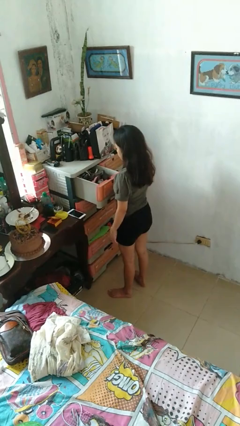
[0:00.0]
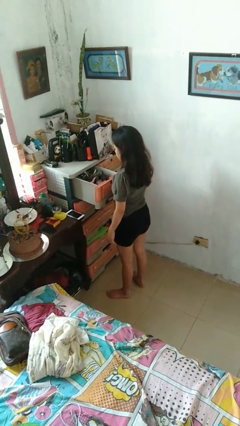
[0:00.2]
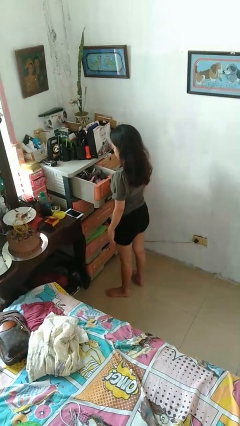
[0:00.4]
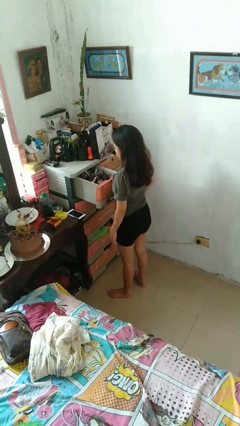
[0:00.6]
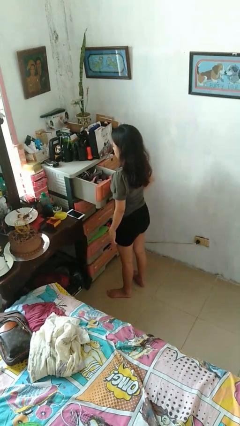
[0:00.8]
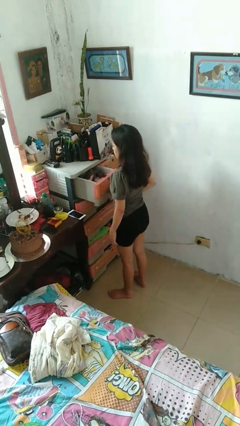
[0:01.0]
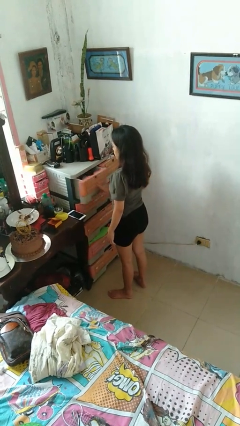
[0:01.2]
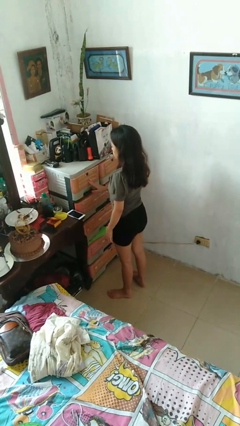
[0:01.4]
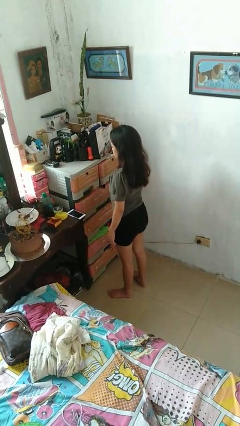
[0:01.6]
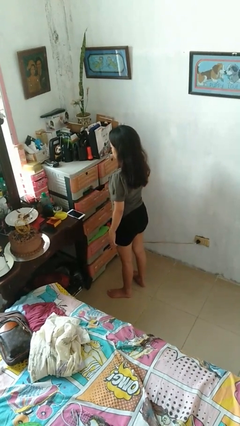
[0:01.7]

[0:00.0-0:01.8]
person closes dresser drawer

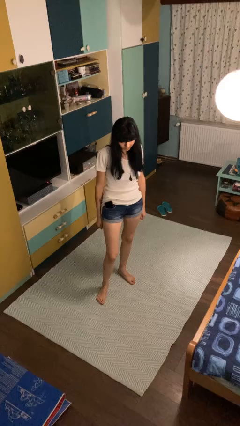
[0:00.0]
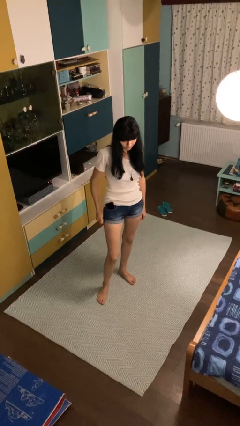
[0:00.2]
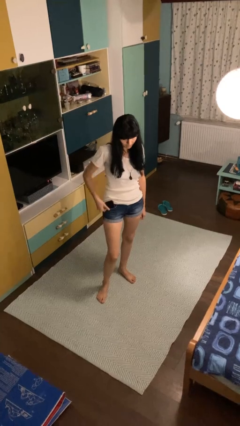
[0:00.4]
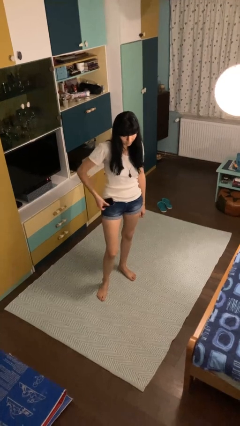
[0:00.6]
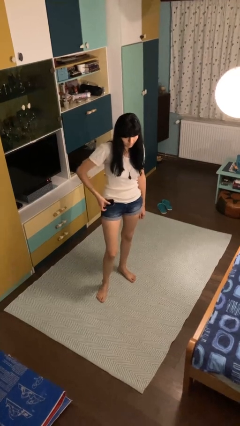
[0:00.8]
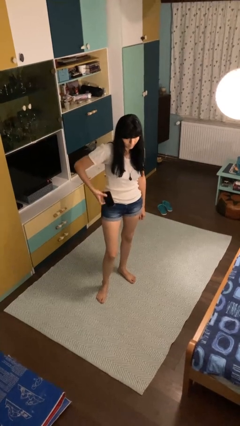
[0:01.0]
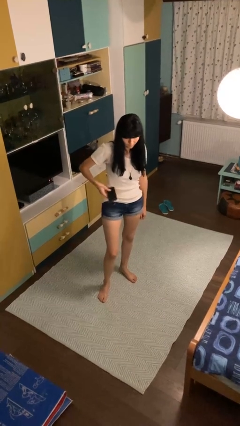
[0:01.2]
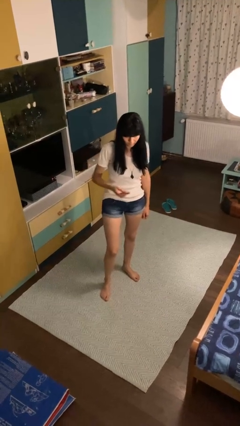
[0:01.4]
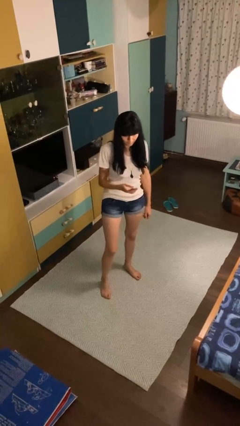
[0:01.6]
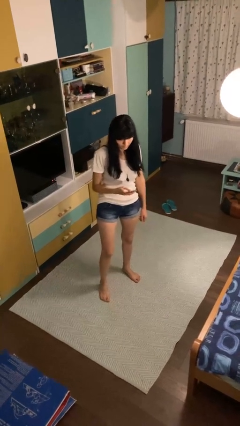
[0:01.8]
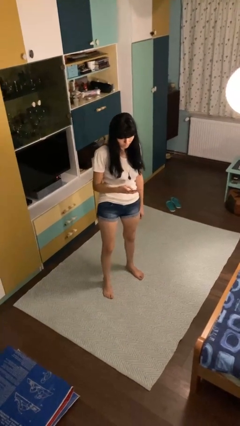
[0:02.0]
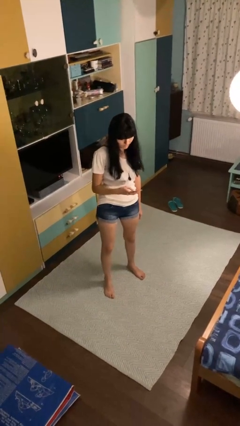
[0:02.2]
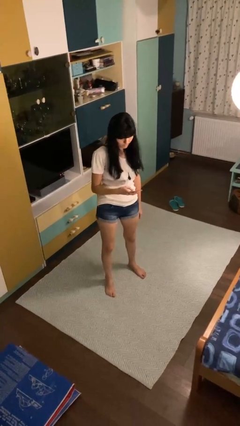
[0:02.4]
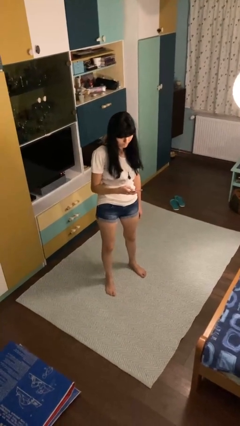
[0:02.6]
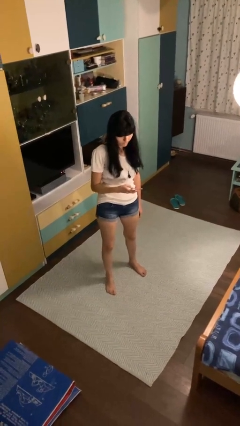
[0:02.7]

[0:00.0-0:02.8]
person takes phone from pocket

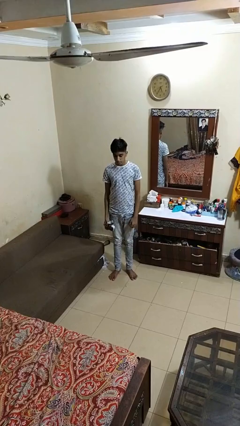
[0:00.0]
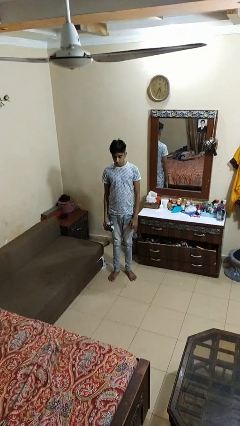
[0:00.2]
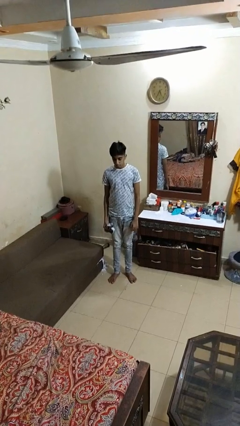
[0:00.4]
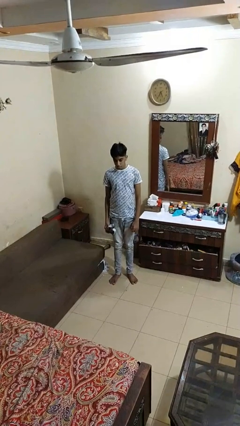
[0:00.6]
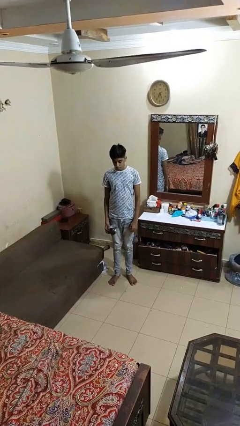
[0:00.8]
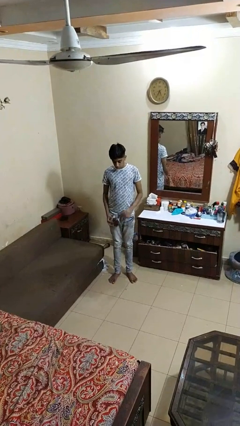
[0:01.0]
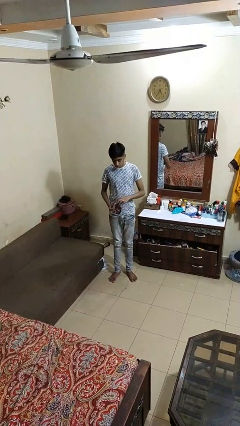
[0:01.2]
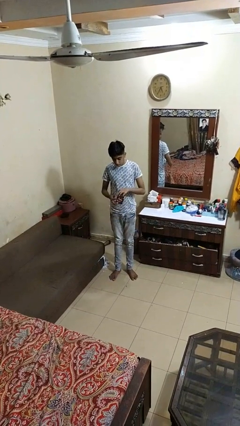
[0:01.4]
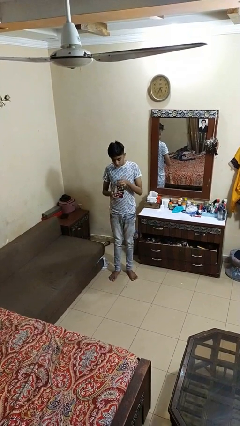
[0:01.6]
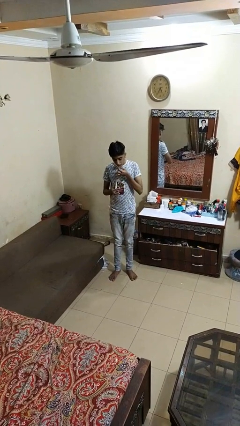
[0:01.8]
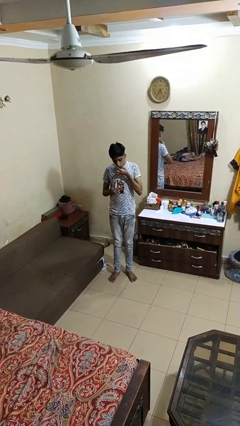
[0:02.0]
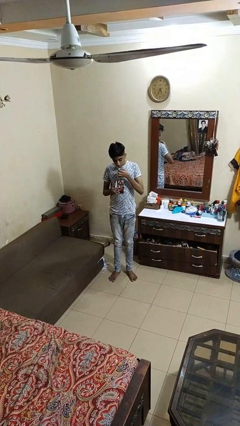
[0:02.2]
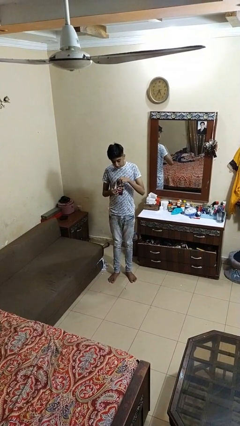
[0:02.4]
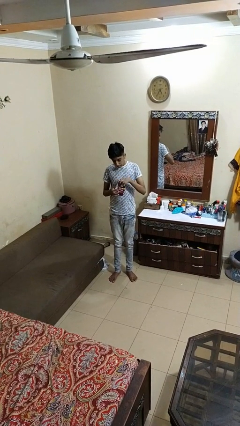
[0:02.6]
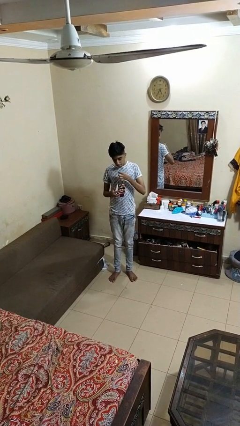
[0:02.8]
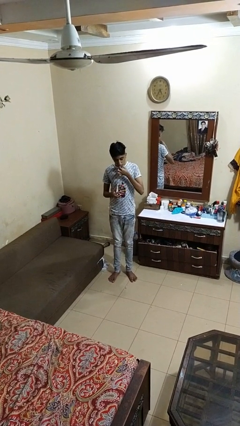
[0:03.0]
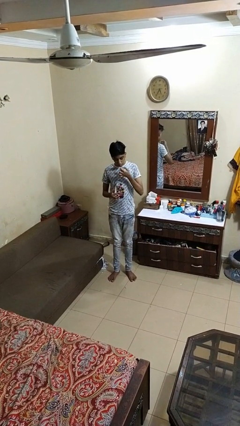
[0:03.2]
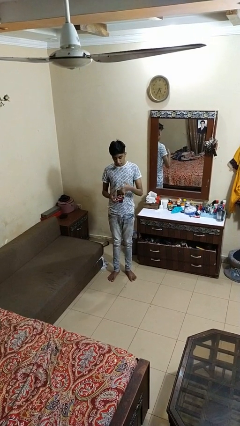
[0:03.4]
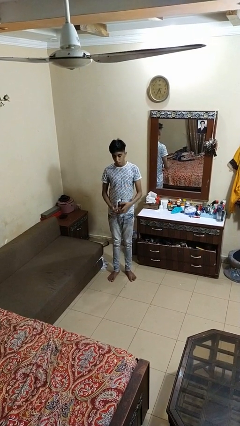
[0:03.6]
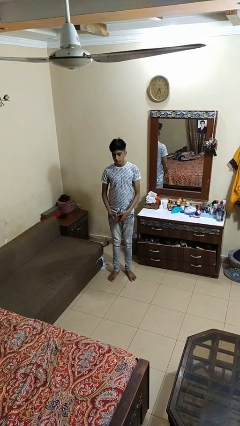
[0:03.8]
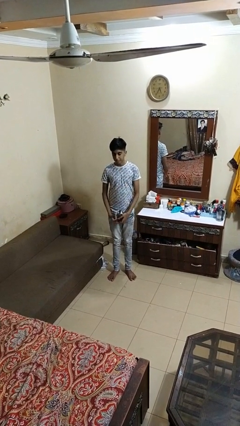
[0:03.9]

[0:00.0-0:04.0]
person eats snack from bag

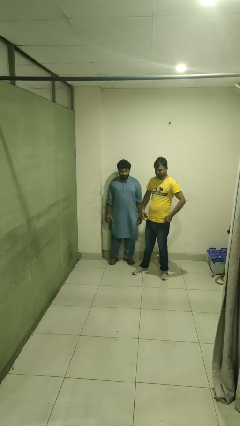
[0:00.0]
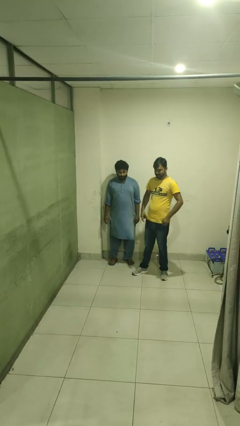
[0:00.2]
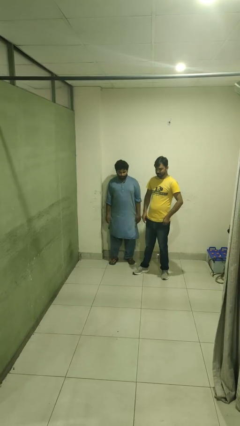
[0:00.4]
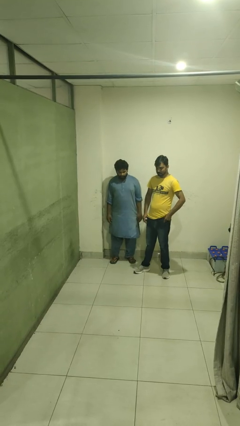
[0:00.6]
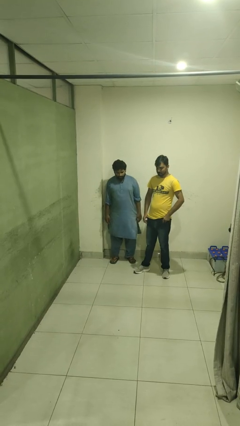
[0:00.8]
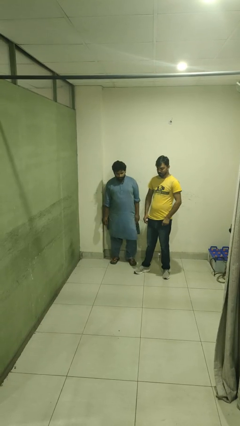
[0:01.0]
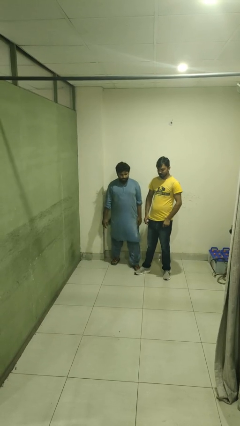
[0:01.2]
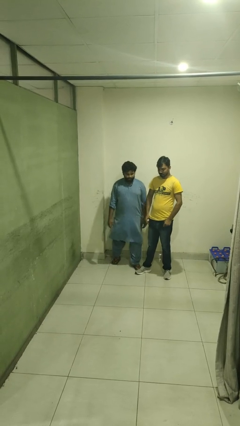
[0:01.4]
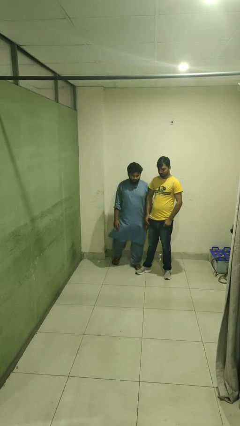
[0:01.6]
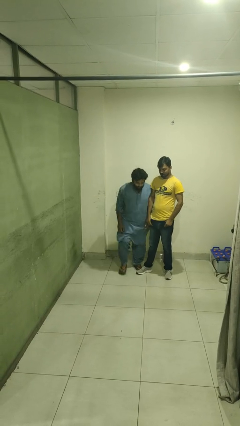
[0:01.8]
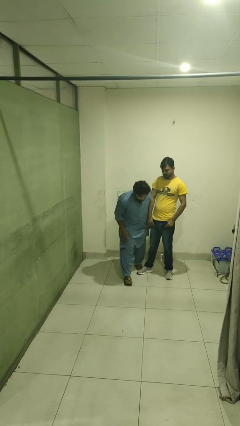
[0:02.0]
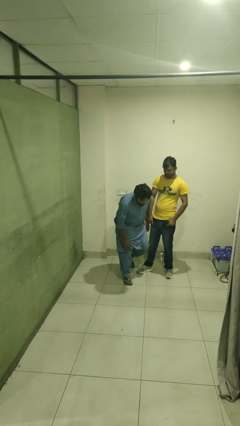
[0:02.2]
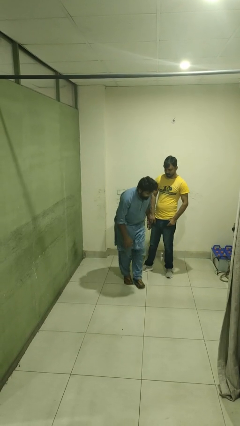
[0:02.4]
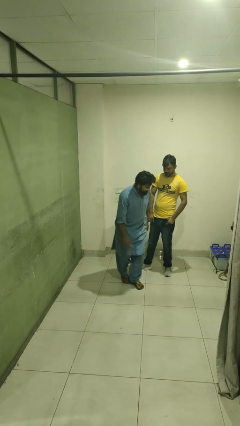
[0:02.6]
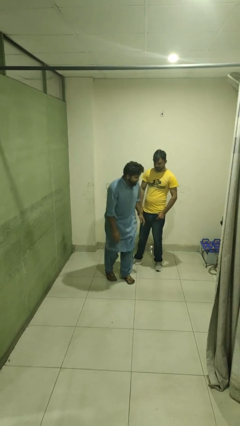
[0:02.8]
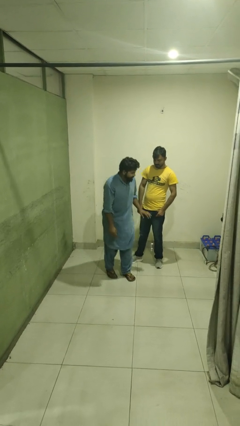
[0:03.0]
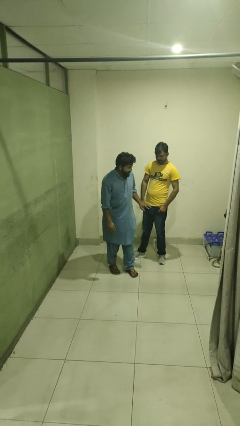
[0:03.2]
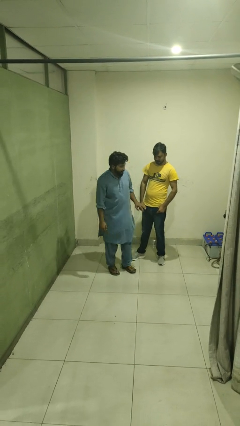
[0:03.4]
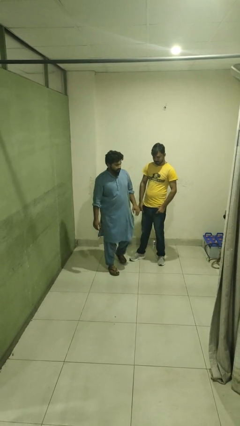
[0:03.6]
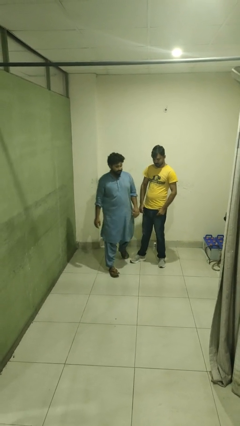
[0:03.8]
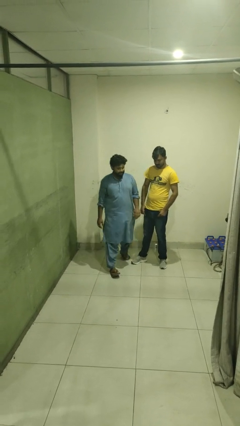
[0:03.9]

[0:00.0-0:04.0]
person bumps into person

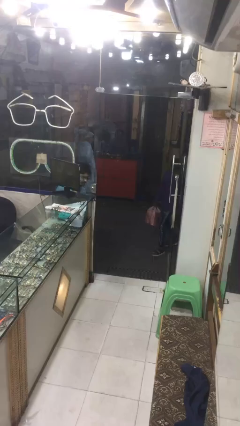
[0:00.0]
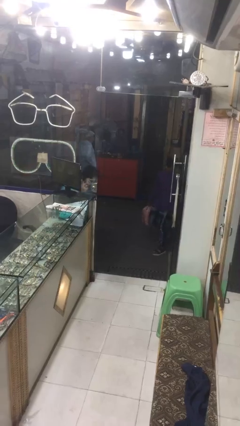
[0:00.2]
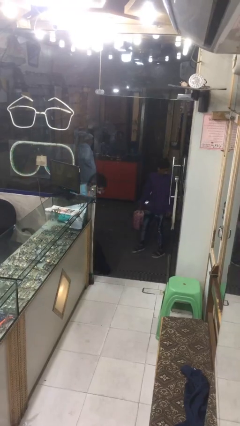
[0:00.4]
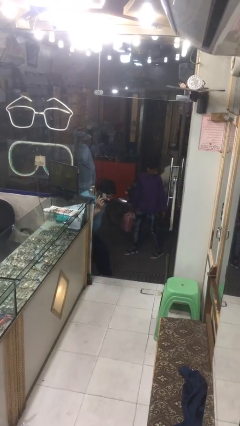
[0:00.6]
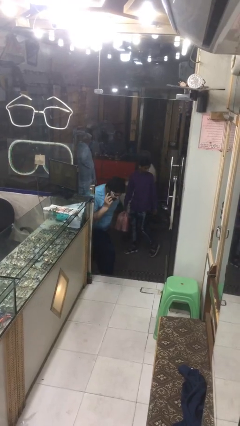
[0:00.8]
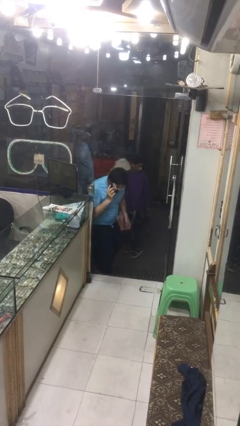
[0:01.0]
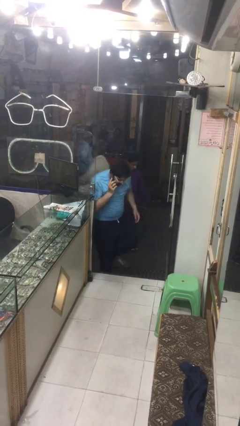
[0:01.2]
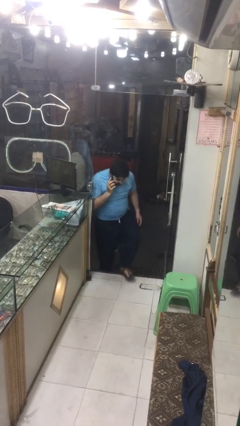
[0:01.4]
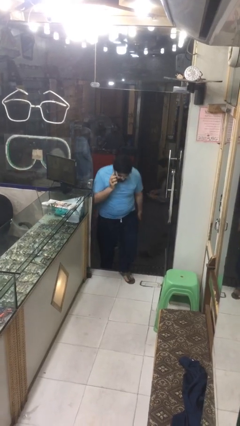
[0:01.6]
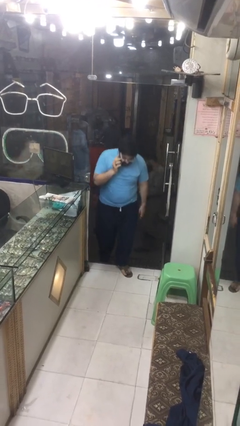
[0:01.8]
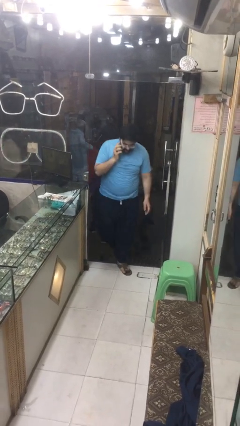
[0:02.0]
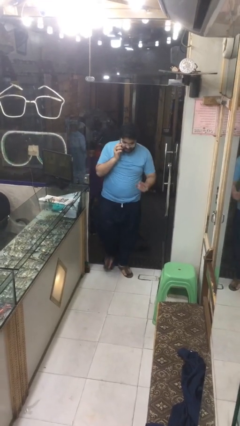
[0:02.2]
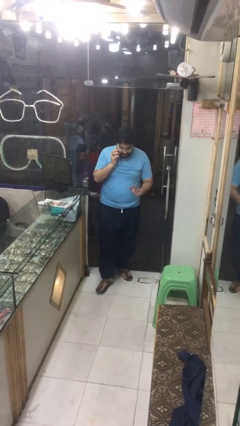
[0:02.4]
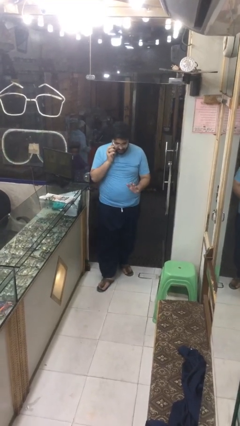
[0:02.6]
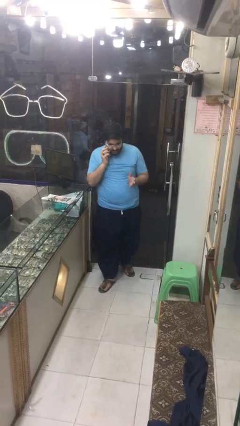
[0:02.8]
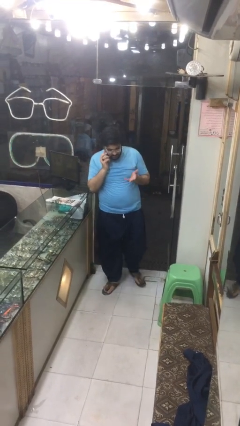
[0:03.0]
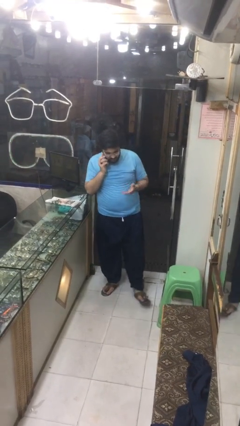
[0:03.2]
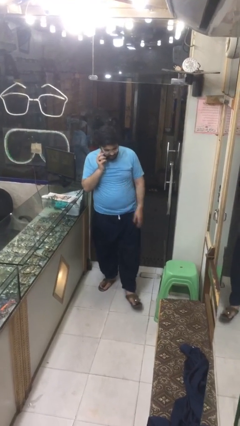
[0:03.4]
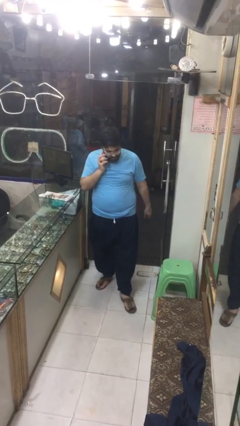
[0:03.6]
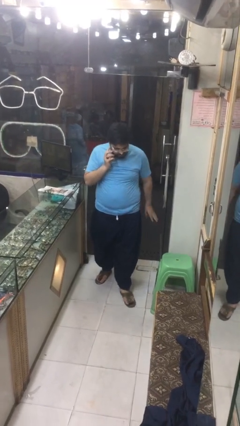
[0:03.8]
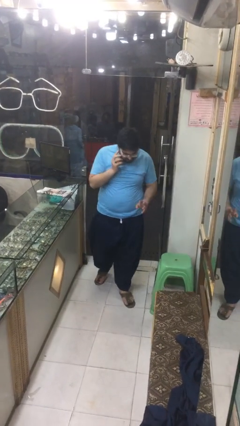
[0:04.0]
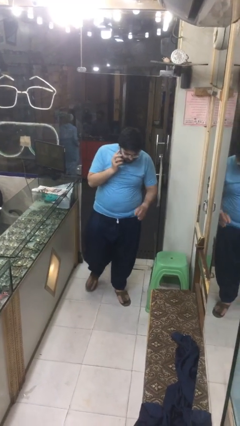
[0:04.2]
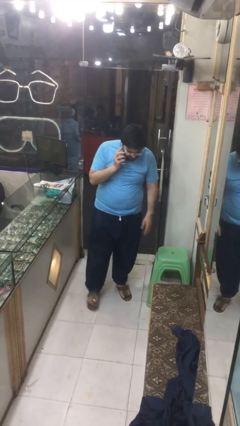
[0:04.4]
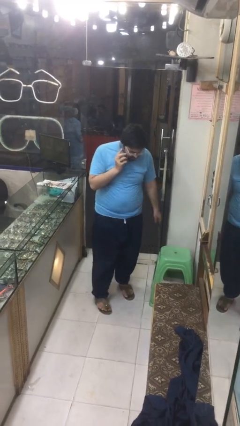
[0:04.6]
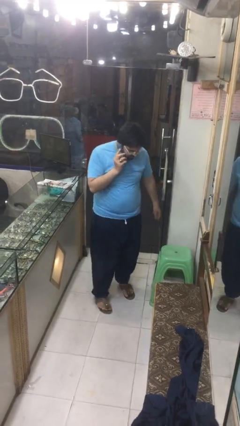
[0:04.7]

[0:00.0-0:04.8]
person enters scene through structure
